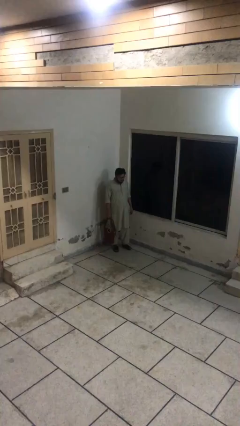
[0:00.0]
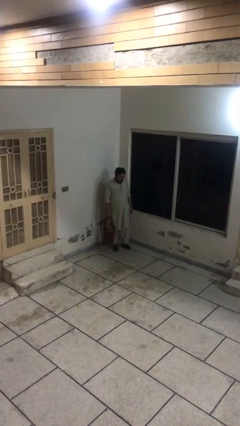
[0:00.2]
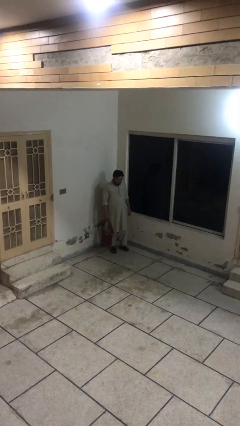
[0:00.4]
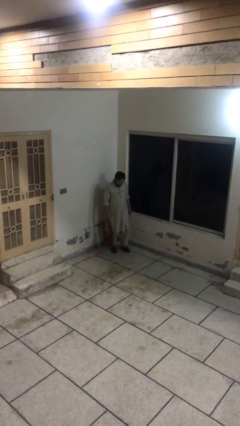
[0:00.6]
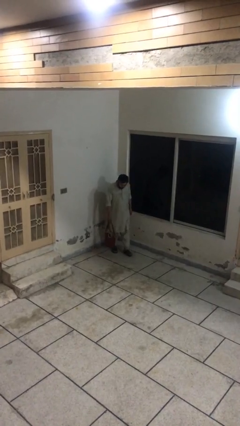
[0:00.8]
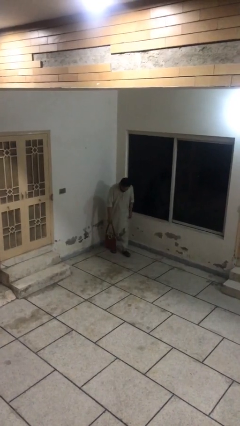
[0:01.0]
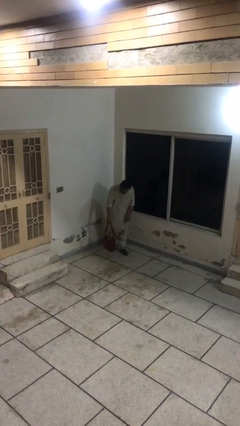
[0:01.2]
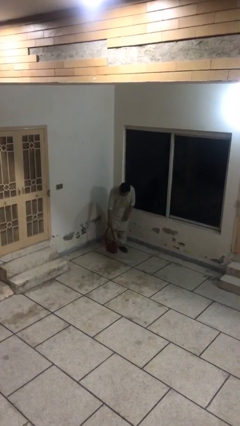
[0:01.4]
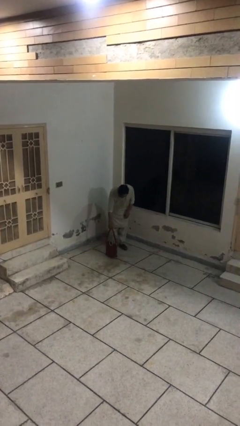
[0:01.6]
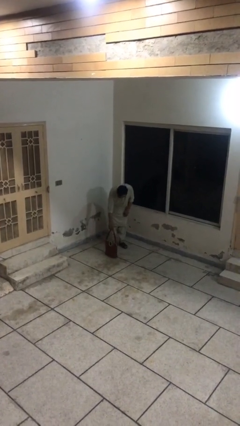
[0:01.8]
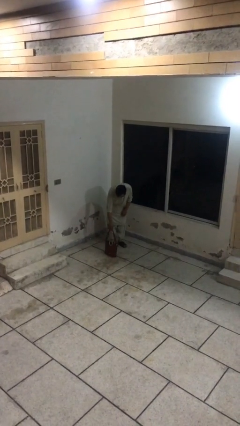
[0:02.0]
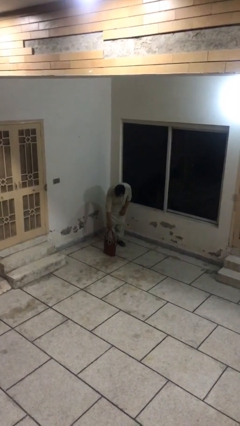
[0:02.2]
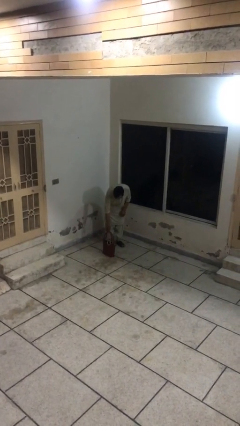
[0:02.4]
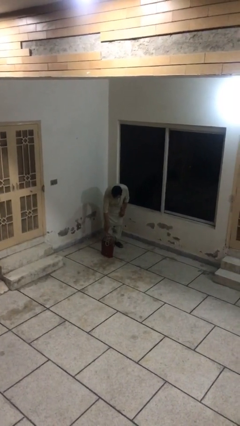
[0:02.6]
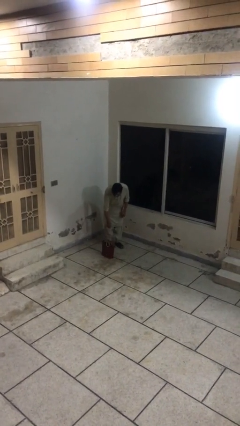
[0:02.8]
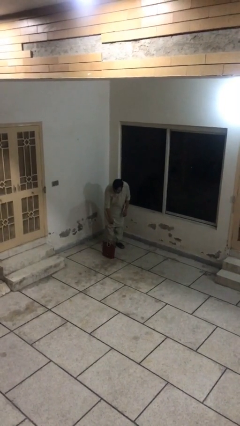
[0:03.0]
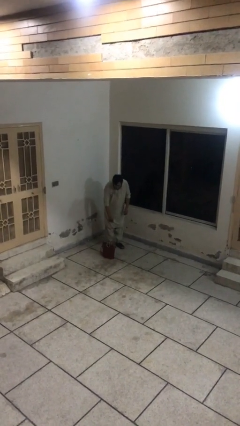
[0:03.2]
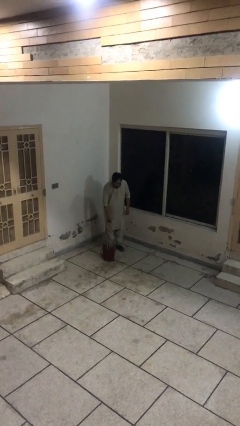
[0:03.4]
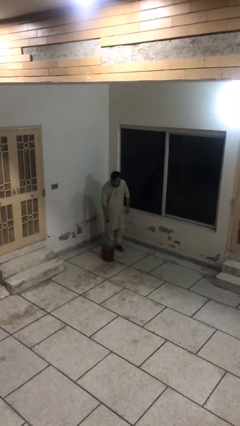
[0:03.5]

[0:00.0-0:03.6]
person puts down object on floor

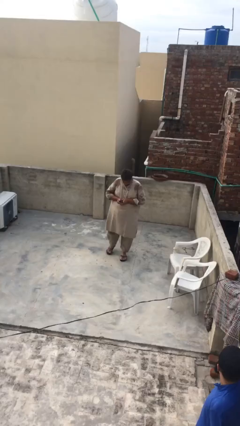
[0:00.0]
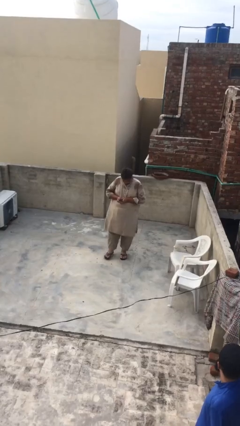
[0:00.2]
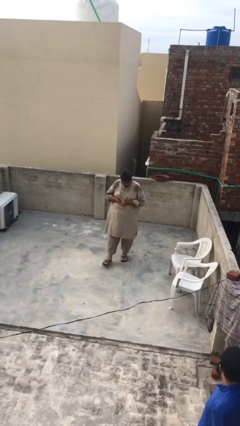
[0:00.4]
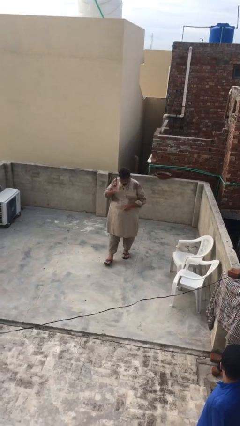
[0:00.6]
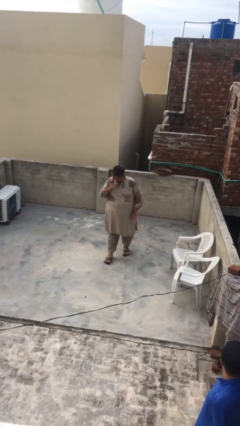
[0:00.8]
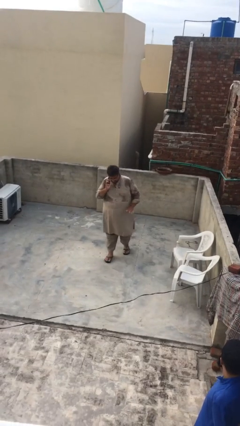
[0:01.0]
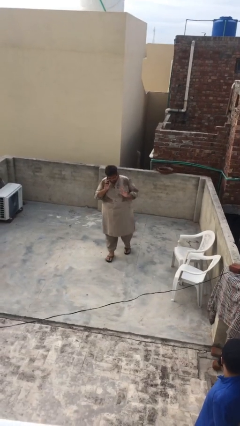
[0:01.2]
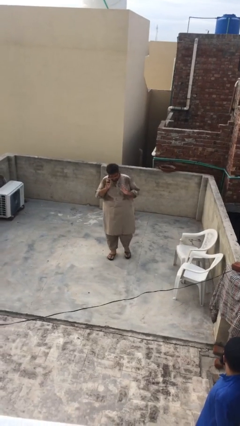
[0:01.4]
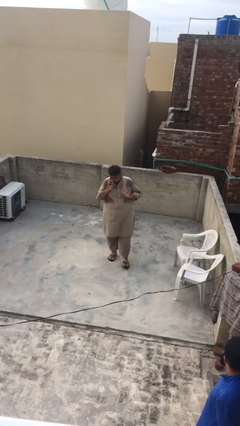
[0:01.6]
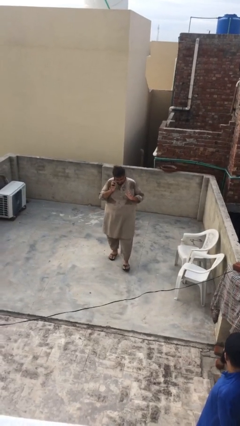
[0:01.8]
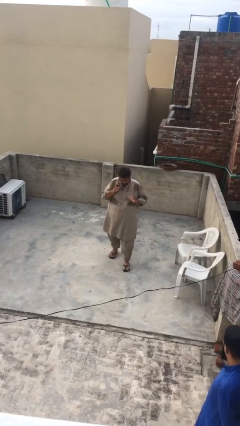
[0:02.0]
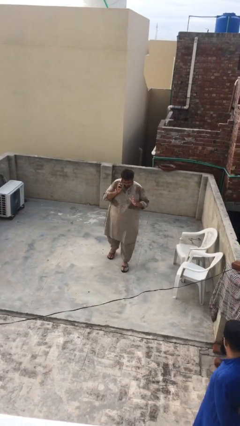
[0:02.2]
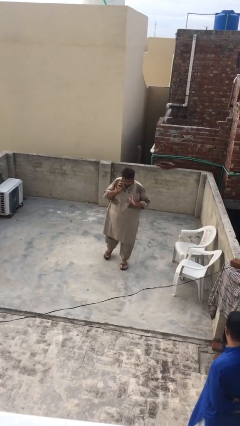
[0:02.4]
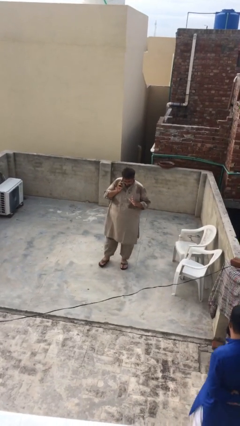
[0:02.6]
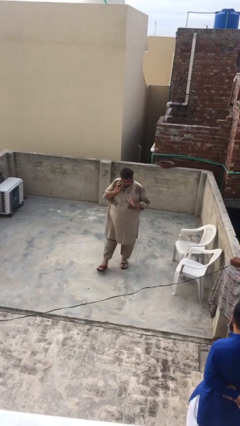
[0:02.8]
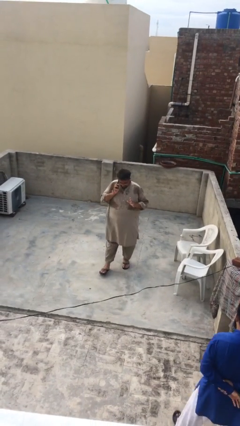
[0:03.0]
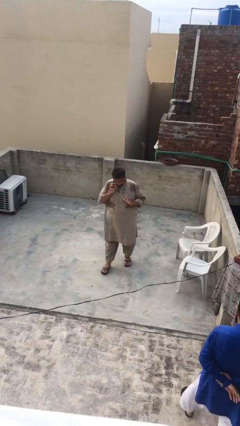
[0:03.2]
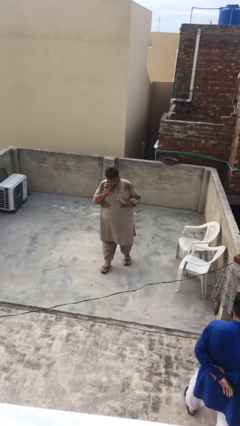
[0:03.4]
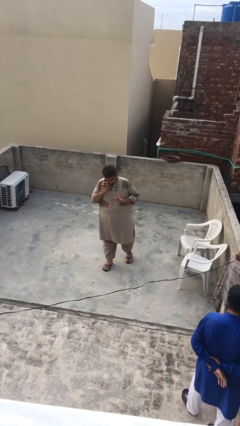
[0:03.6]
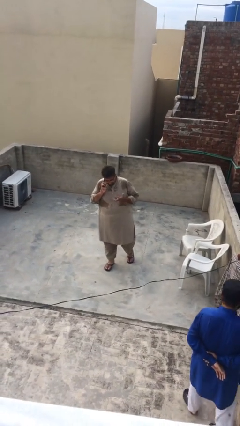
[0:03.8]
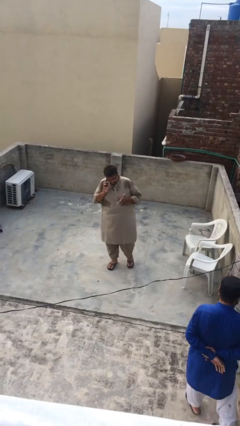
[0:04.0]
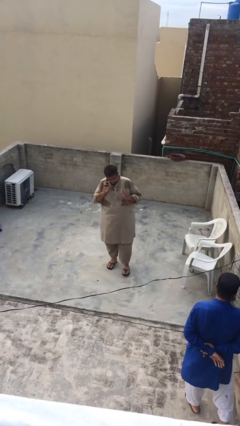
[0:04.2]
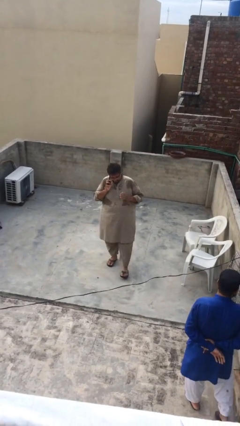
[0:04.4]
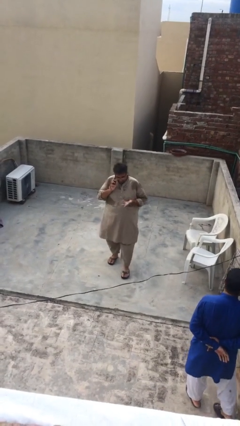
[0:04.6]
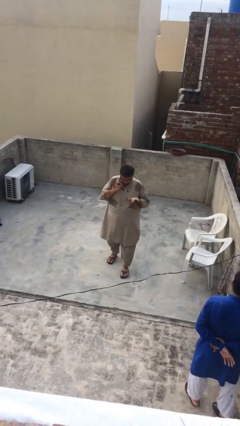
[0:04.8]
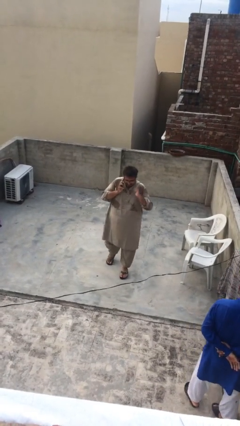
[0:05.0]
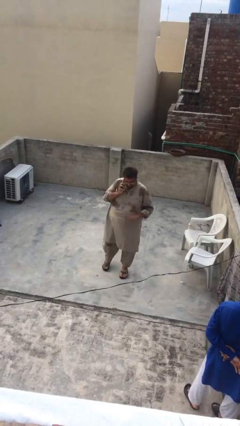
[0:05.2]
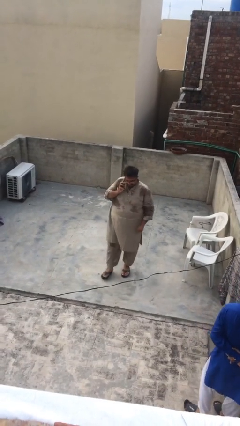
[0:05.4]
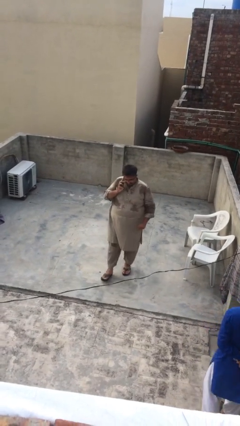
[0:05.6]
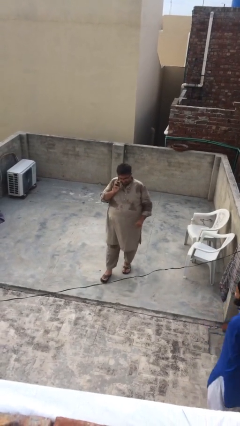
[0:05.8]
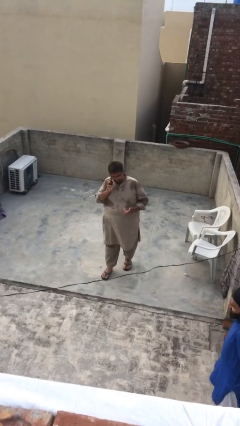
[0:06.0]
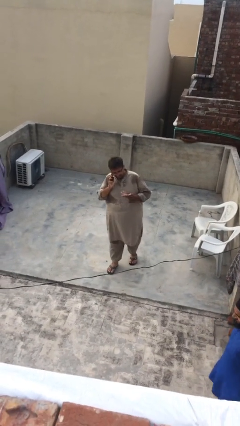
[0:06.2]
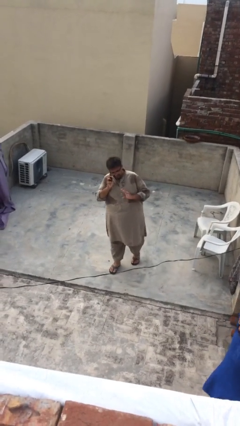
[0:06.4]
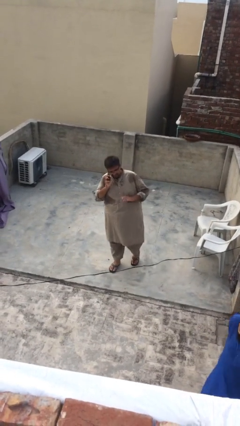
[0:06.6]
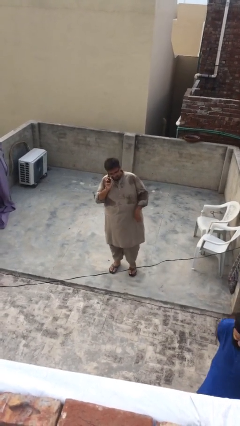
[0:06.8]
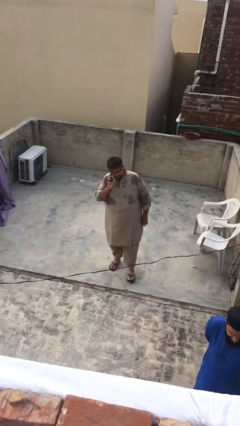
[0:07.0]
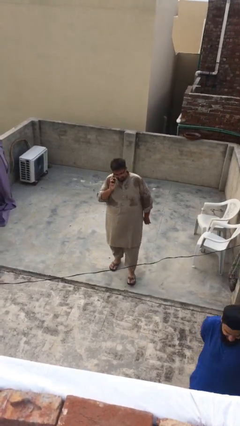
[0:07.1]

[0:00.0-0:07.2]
person talks on phone

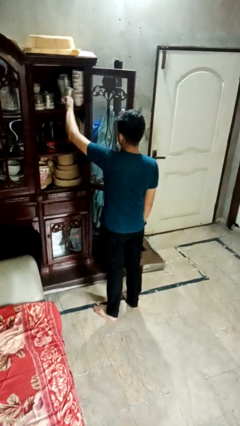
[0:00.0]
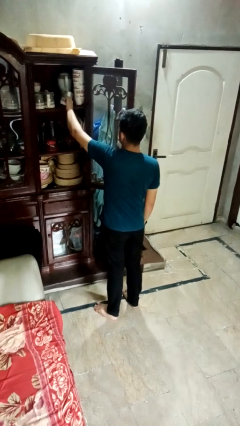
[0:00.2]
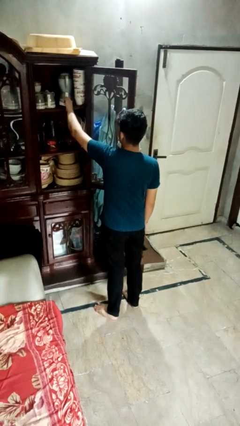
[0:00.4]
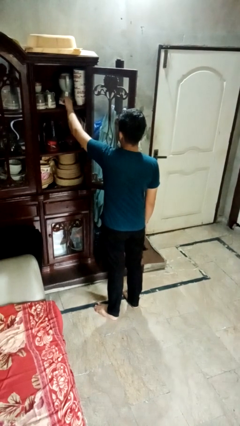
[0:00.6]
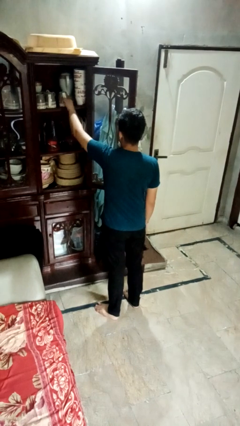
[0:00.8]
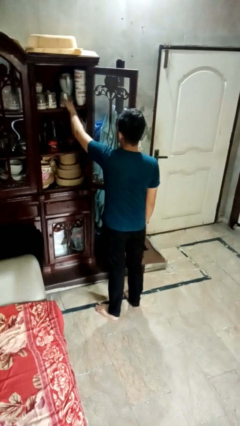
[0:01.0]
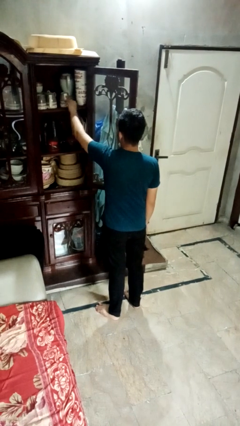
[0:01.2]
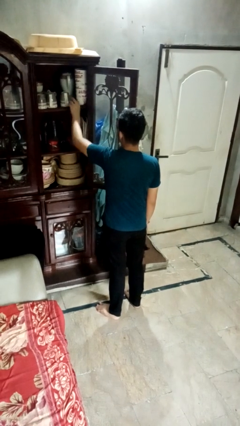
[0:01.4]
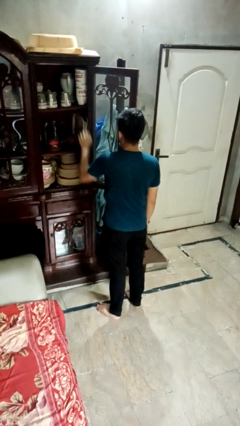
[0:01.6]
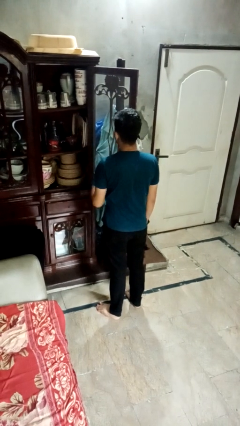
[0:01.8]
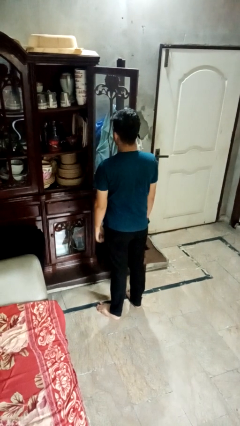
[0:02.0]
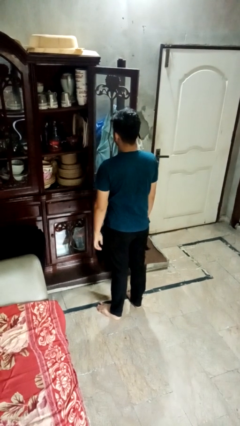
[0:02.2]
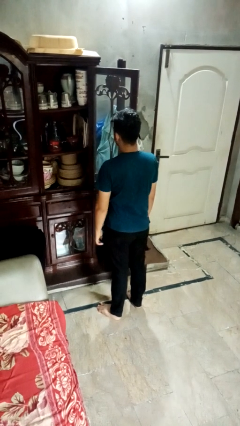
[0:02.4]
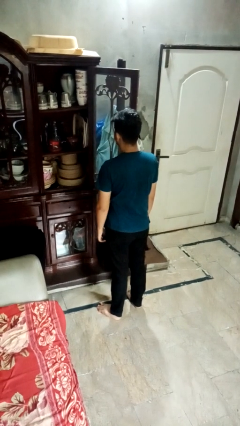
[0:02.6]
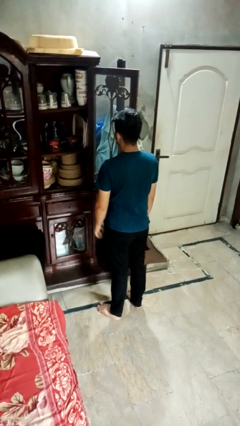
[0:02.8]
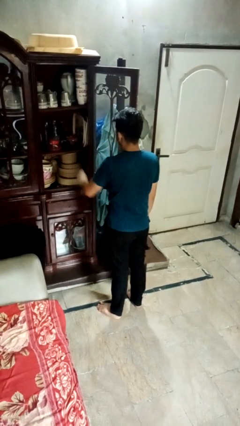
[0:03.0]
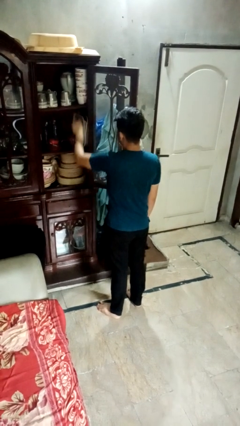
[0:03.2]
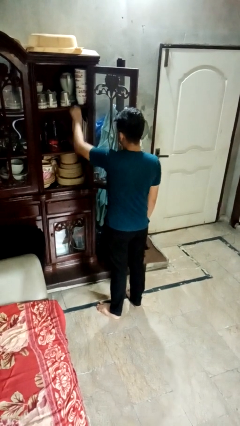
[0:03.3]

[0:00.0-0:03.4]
person puts object in cabinet

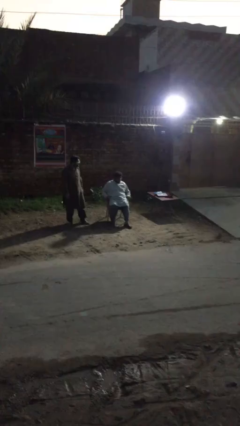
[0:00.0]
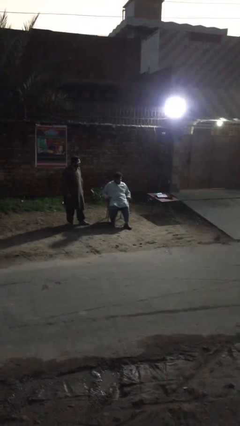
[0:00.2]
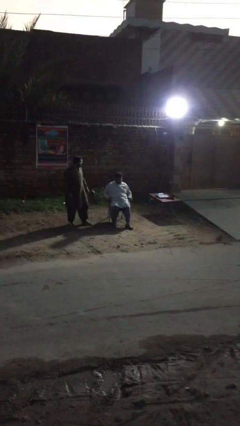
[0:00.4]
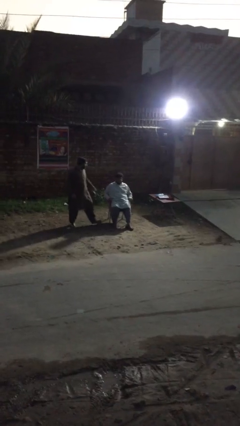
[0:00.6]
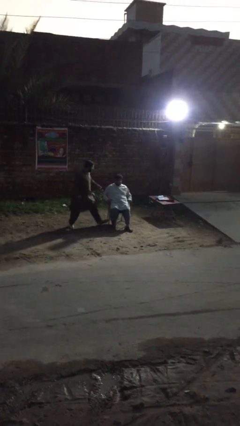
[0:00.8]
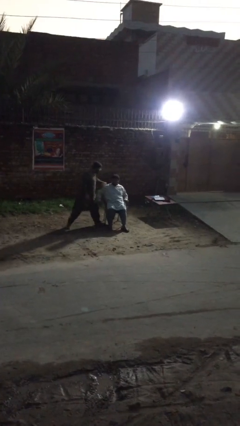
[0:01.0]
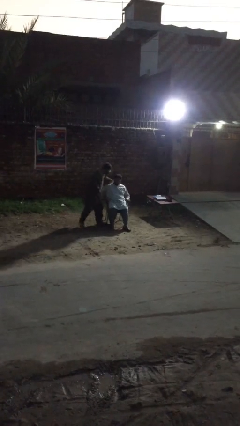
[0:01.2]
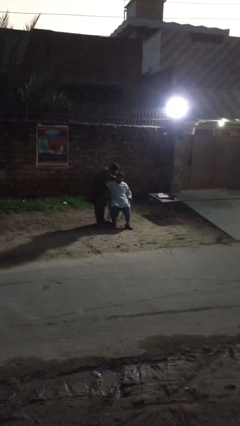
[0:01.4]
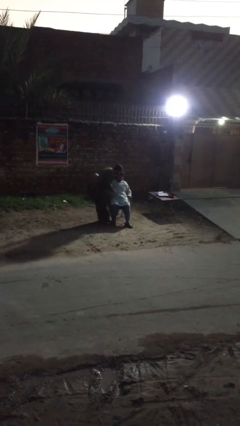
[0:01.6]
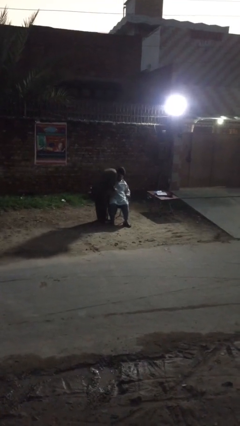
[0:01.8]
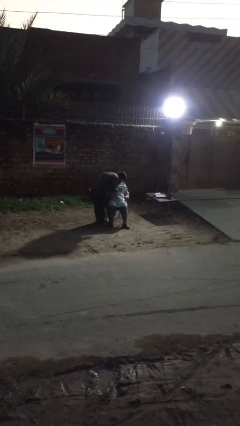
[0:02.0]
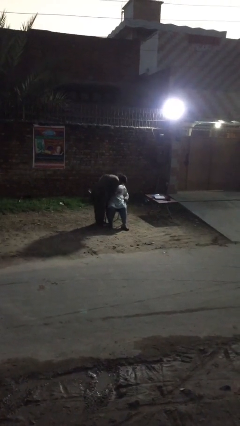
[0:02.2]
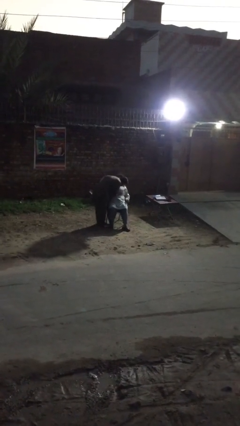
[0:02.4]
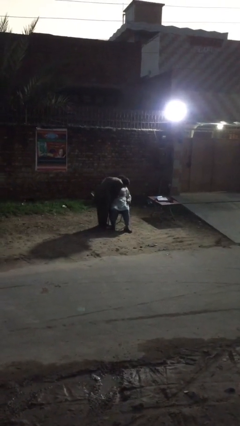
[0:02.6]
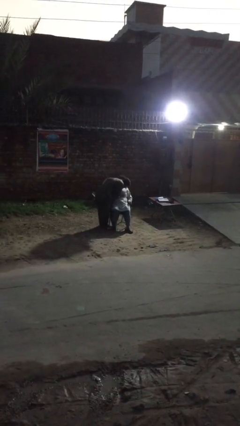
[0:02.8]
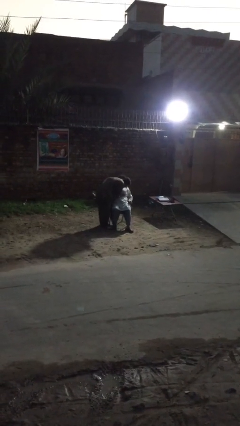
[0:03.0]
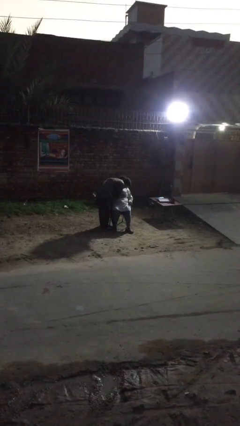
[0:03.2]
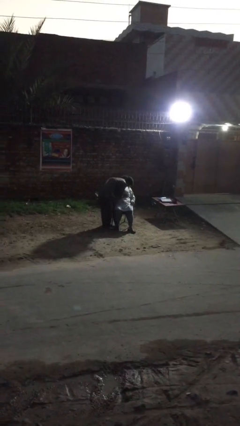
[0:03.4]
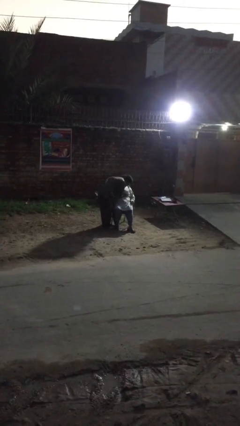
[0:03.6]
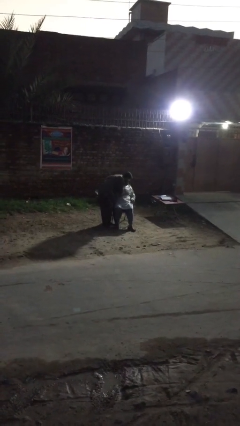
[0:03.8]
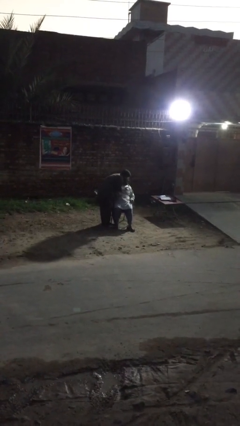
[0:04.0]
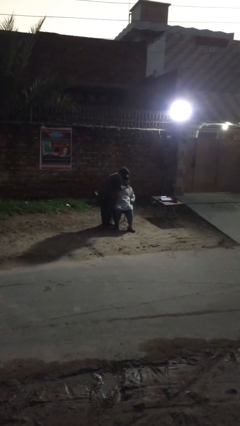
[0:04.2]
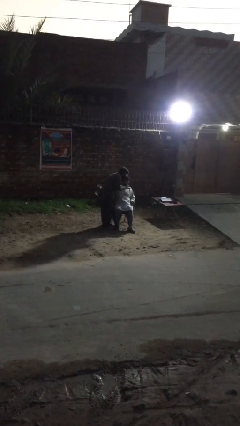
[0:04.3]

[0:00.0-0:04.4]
person embraces person
